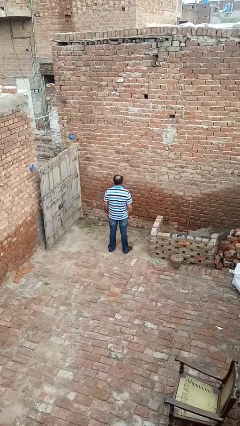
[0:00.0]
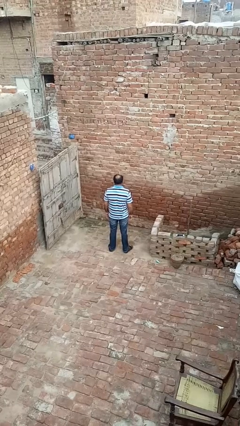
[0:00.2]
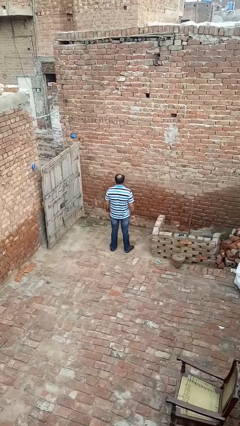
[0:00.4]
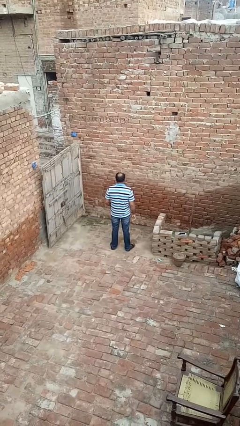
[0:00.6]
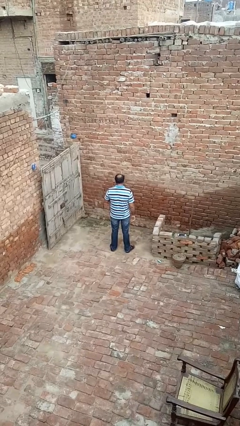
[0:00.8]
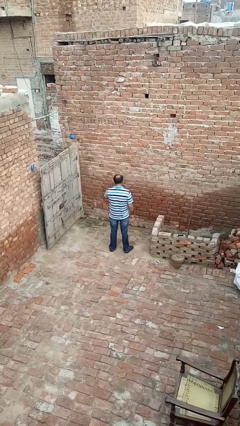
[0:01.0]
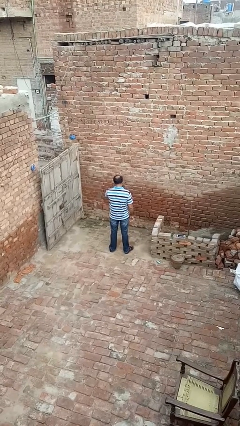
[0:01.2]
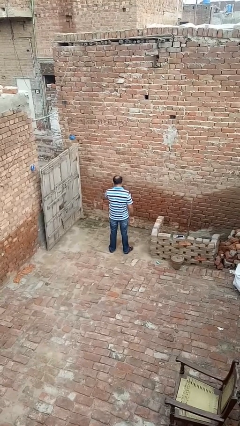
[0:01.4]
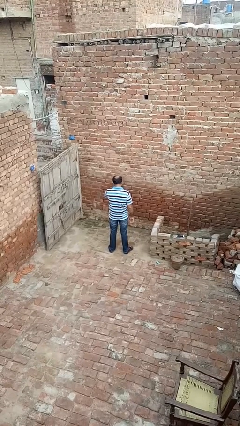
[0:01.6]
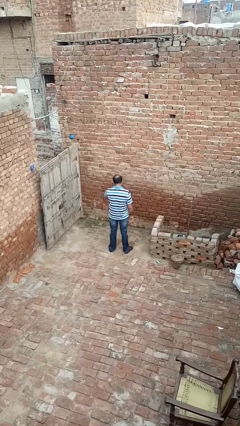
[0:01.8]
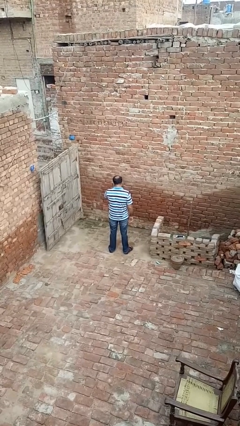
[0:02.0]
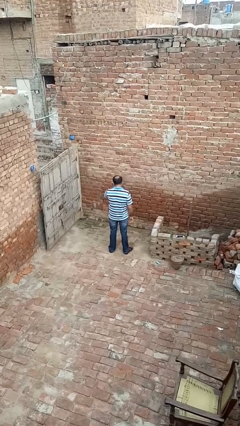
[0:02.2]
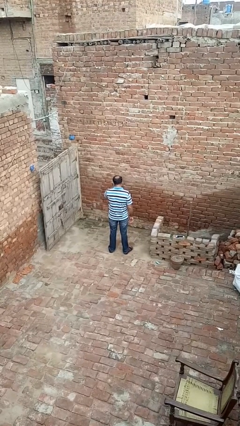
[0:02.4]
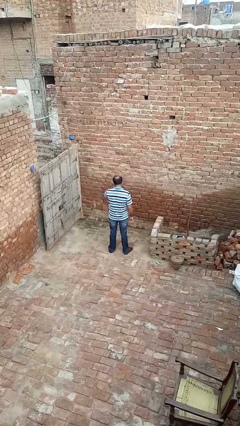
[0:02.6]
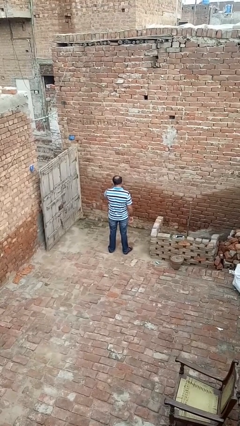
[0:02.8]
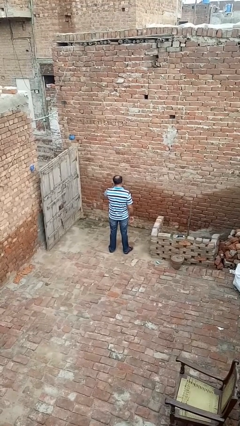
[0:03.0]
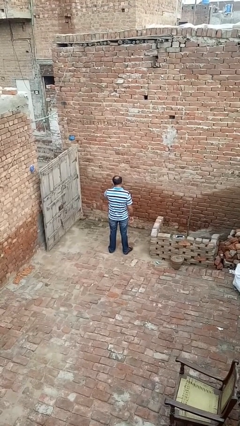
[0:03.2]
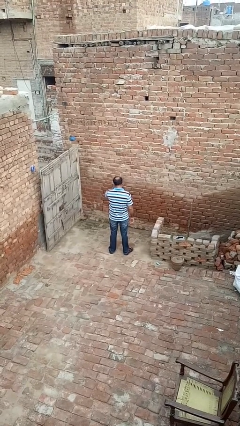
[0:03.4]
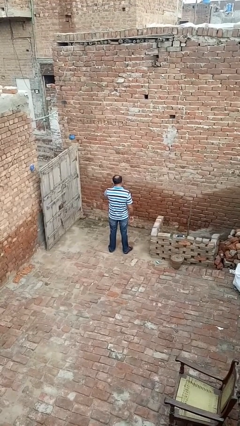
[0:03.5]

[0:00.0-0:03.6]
person rubs eyes

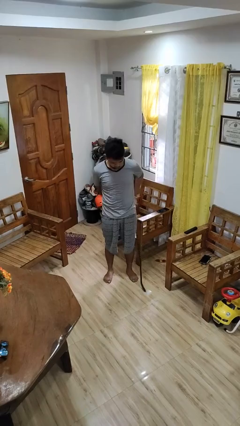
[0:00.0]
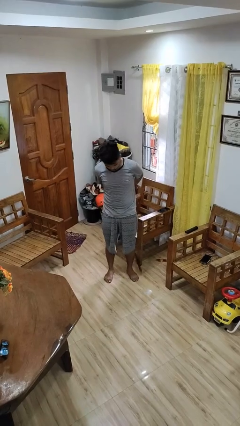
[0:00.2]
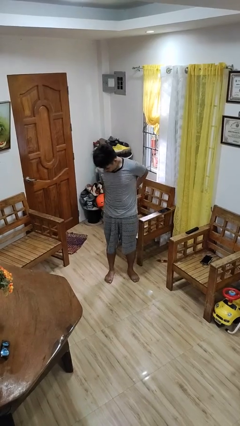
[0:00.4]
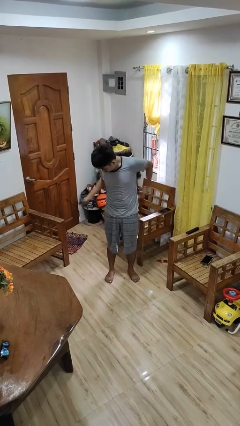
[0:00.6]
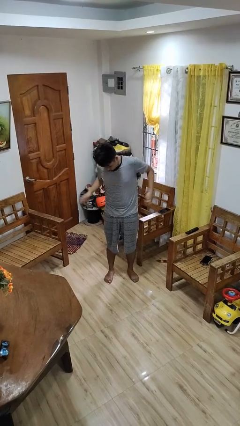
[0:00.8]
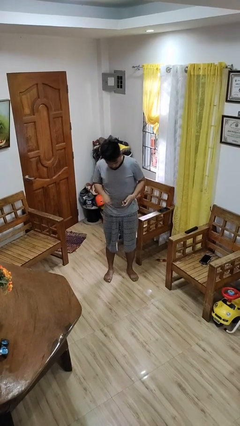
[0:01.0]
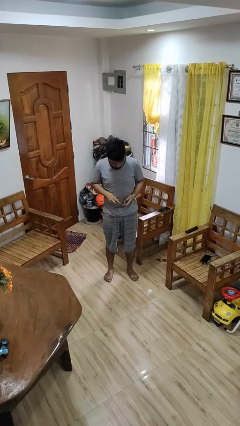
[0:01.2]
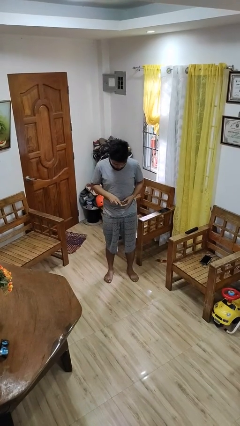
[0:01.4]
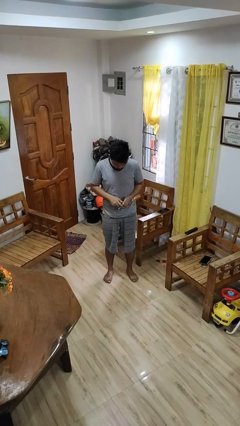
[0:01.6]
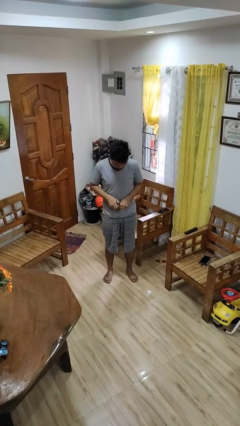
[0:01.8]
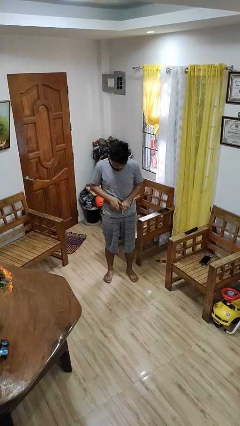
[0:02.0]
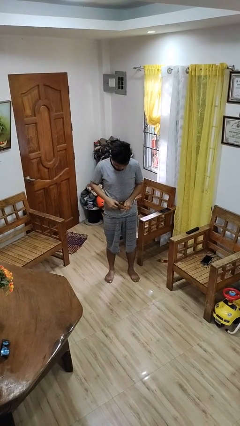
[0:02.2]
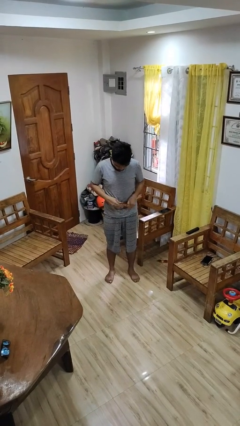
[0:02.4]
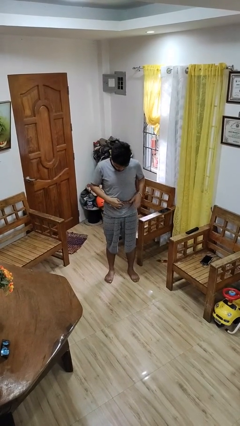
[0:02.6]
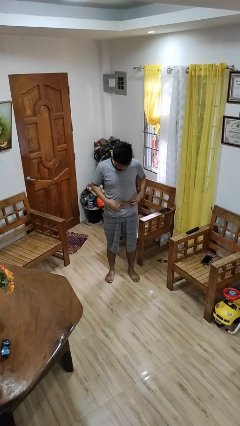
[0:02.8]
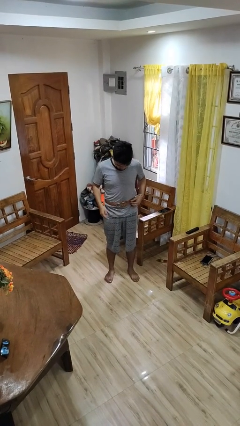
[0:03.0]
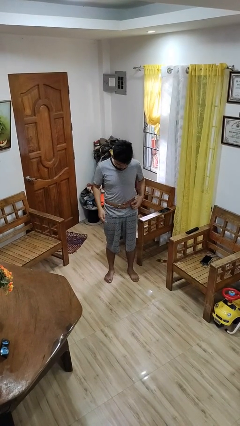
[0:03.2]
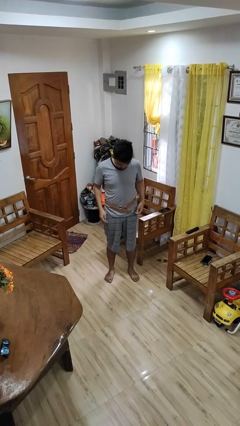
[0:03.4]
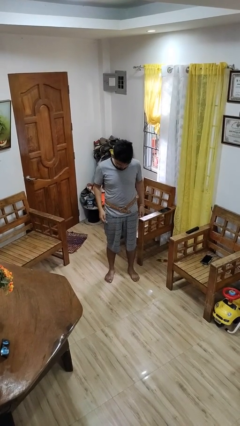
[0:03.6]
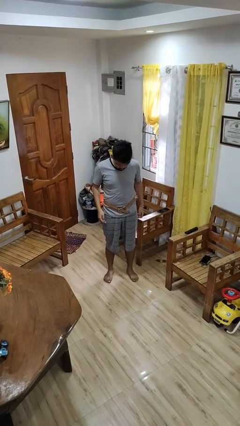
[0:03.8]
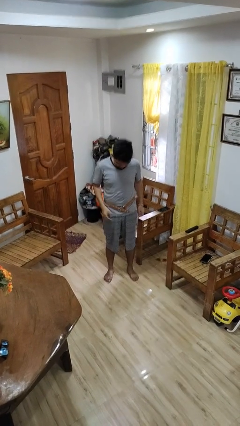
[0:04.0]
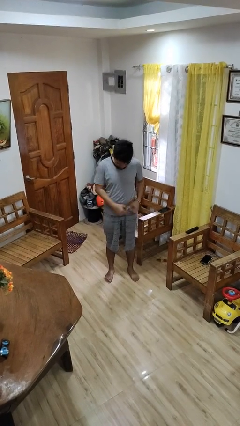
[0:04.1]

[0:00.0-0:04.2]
person puts on belt

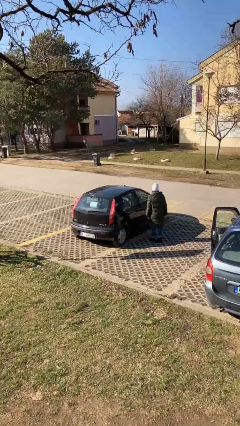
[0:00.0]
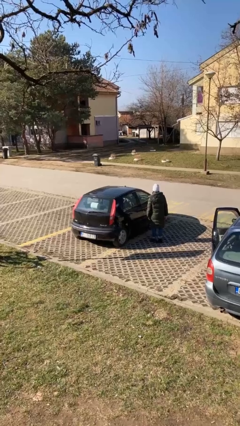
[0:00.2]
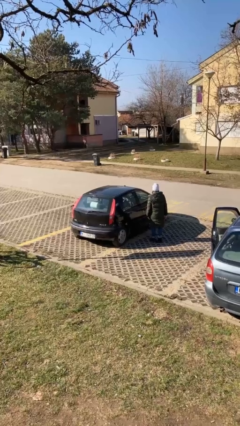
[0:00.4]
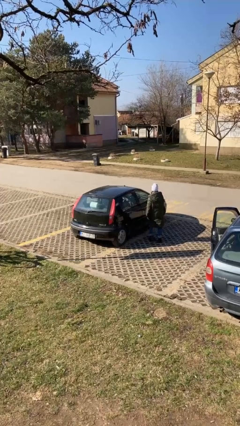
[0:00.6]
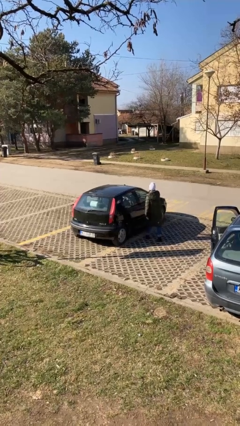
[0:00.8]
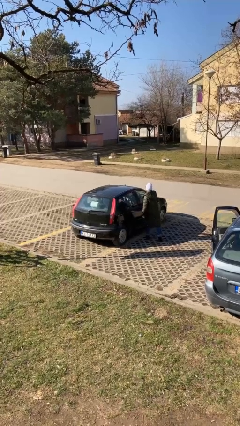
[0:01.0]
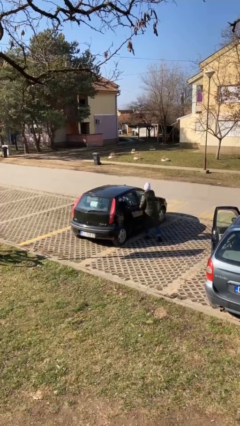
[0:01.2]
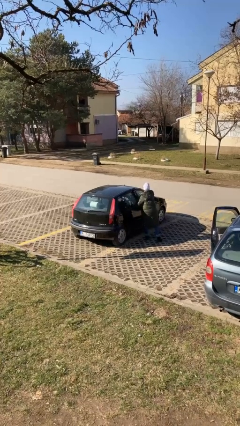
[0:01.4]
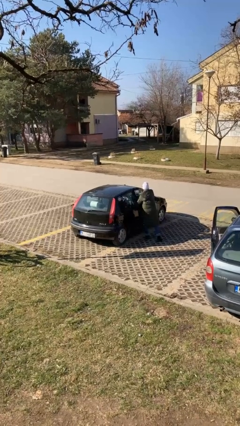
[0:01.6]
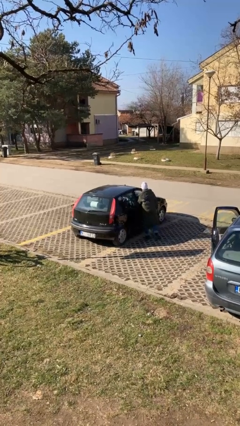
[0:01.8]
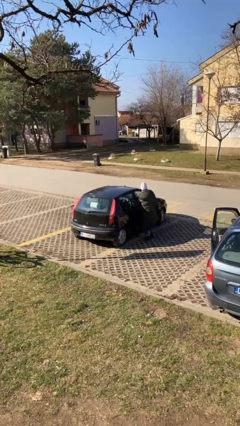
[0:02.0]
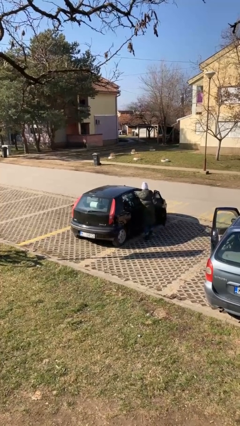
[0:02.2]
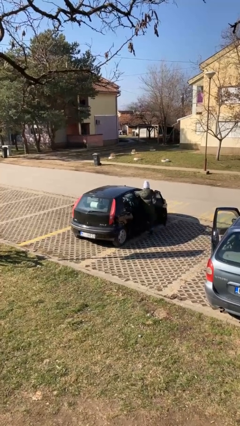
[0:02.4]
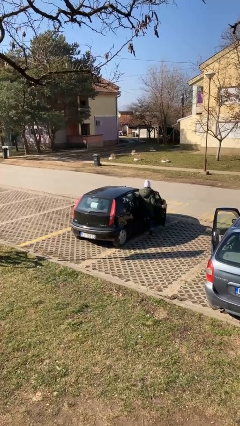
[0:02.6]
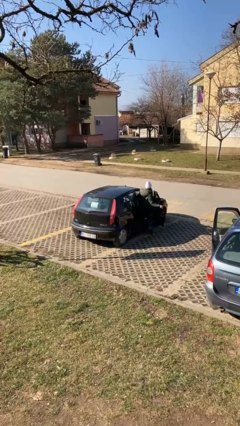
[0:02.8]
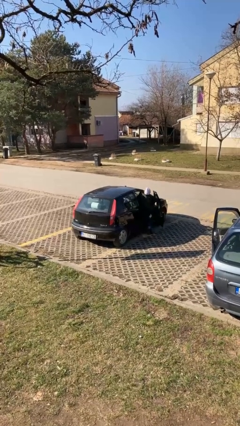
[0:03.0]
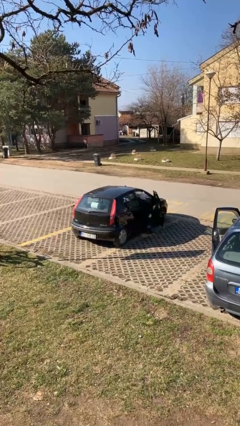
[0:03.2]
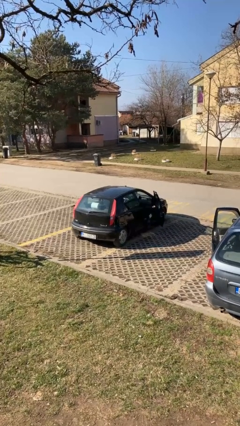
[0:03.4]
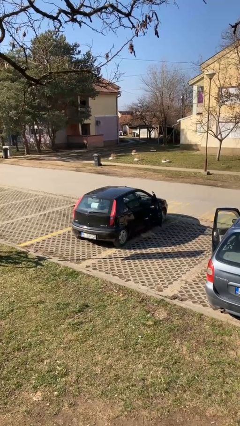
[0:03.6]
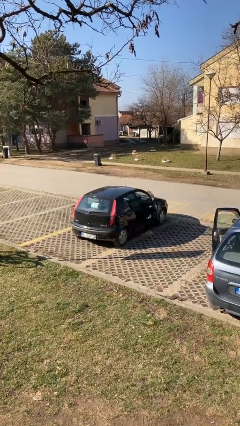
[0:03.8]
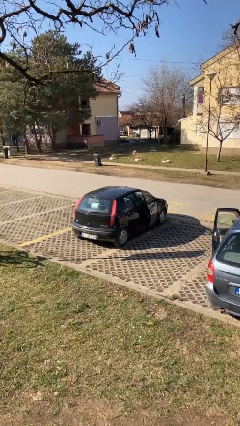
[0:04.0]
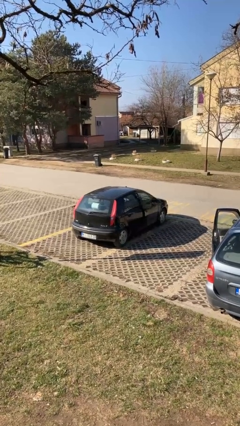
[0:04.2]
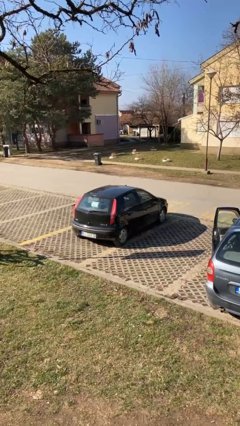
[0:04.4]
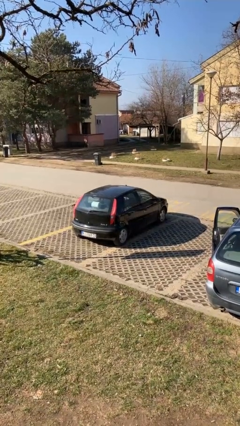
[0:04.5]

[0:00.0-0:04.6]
car picks up person

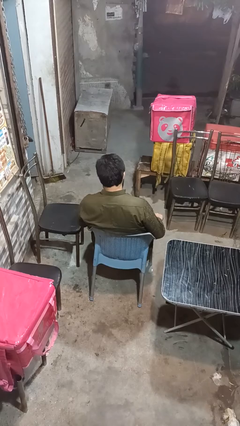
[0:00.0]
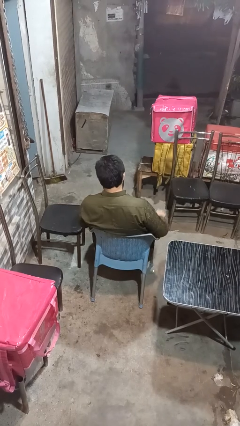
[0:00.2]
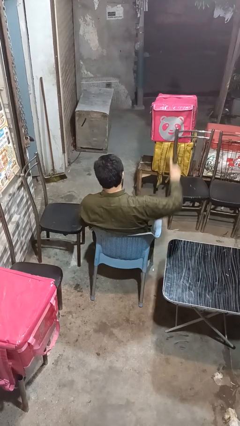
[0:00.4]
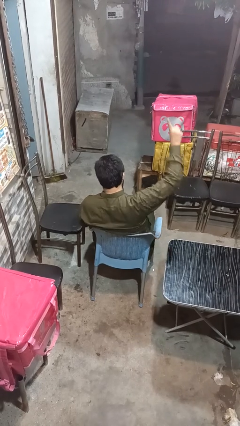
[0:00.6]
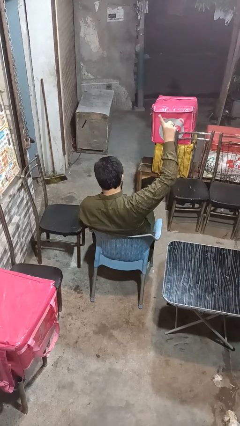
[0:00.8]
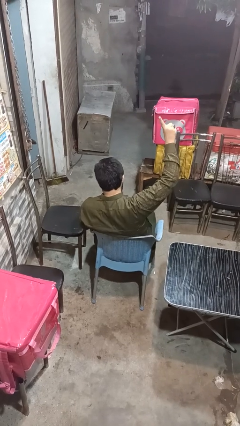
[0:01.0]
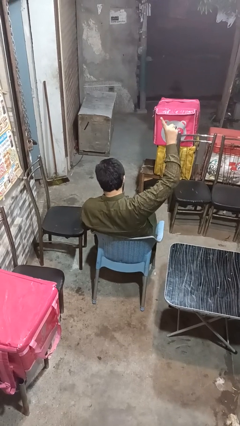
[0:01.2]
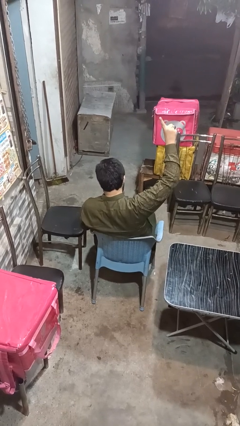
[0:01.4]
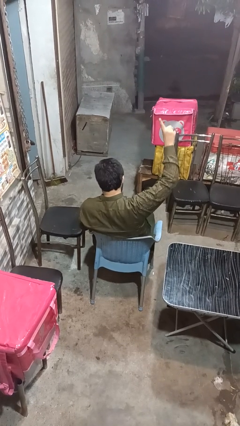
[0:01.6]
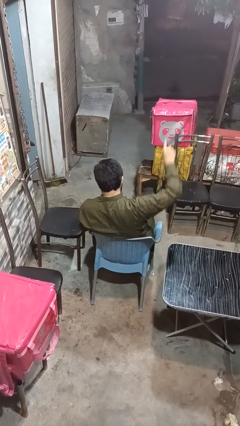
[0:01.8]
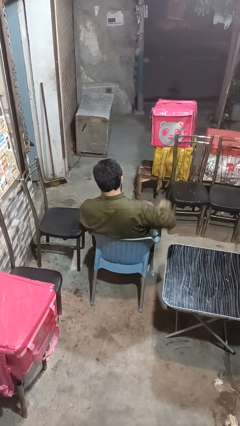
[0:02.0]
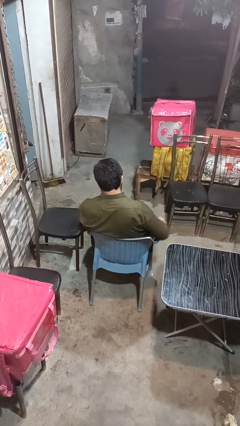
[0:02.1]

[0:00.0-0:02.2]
person gestures number one

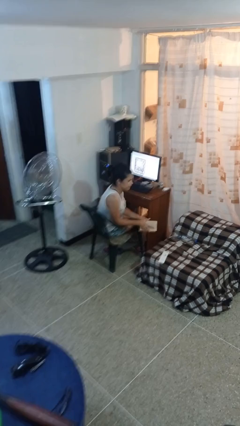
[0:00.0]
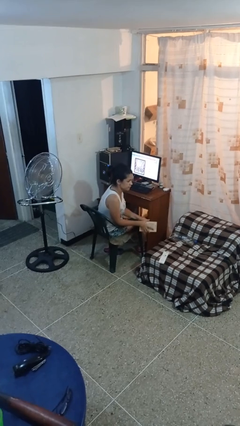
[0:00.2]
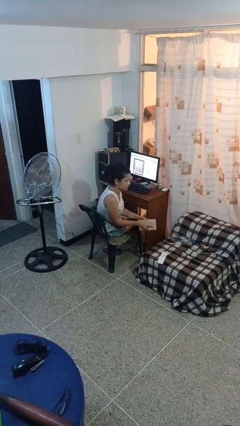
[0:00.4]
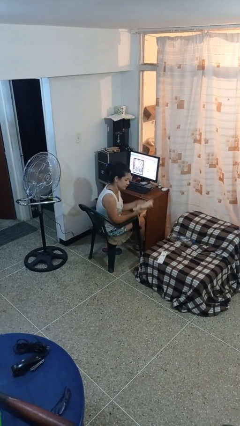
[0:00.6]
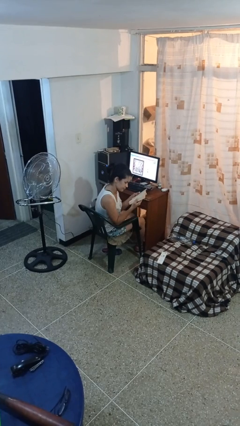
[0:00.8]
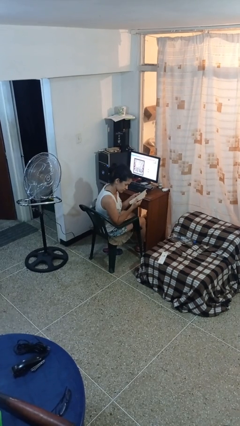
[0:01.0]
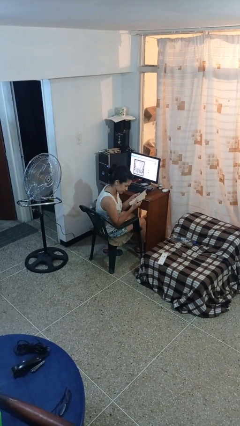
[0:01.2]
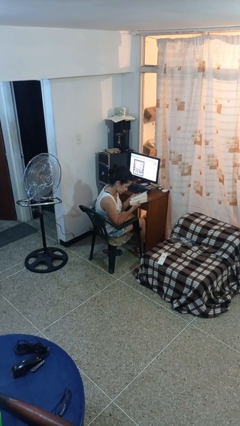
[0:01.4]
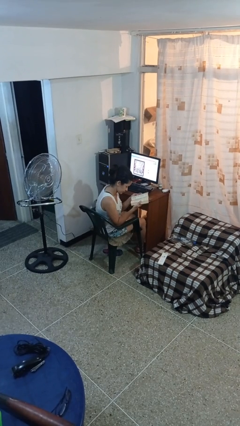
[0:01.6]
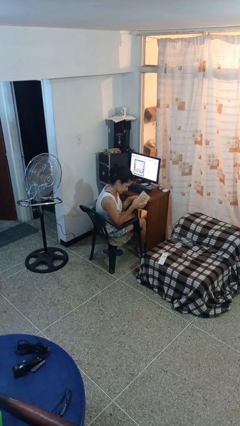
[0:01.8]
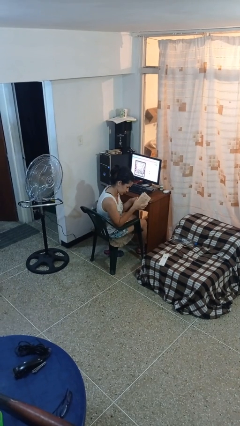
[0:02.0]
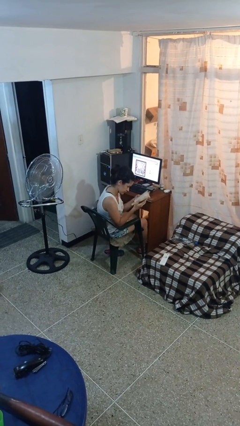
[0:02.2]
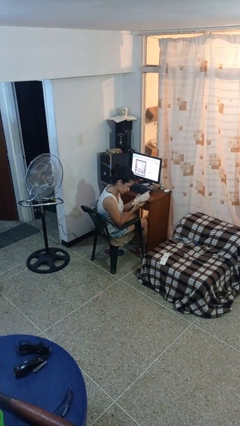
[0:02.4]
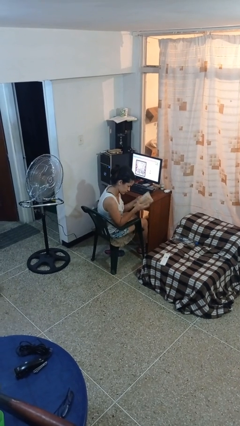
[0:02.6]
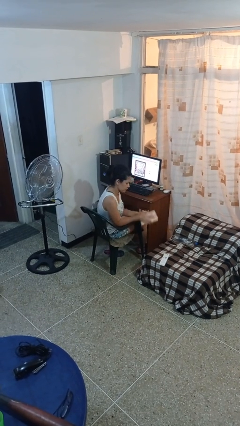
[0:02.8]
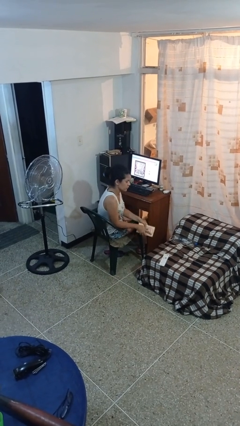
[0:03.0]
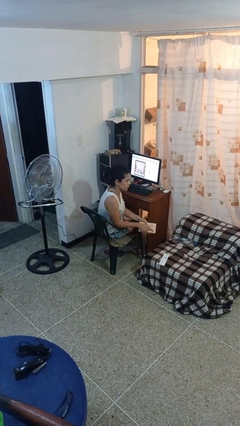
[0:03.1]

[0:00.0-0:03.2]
person reads book
